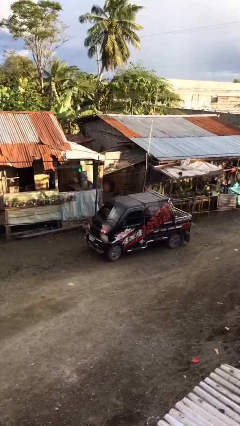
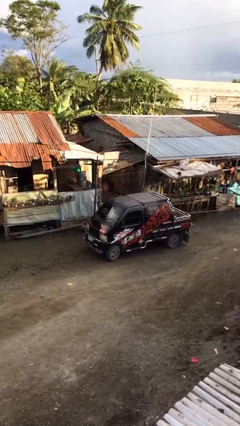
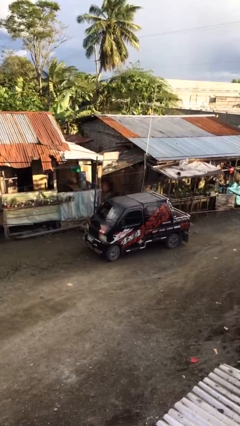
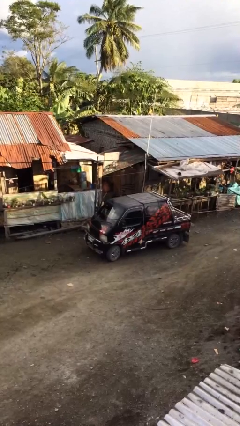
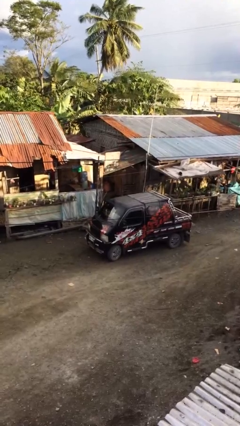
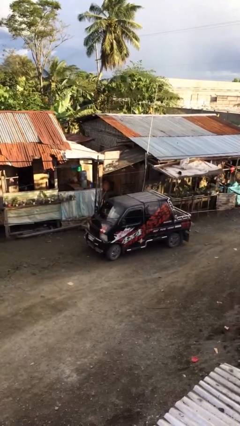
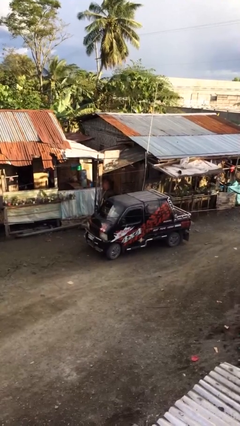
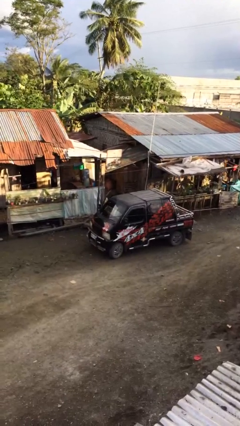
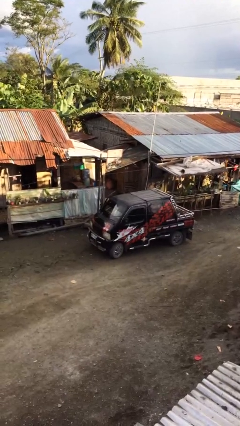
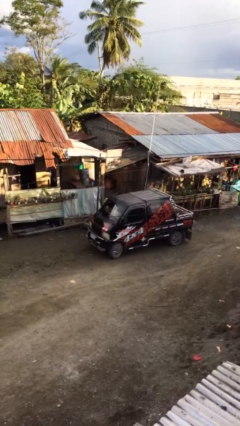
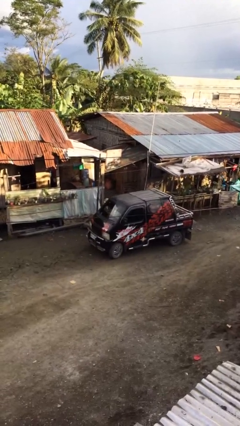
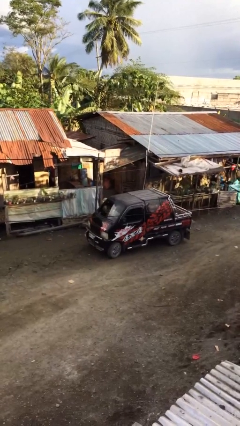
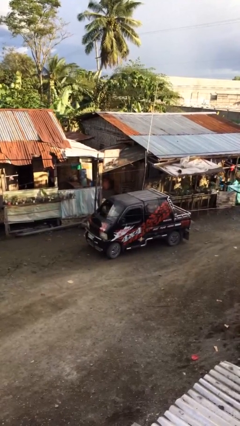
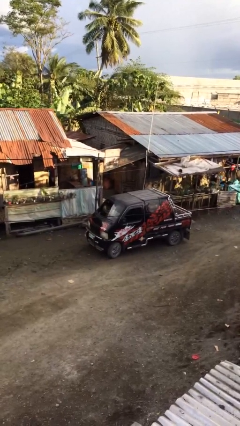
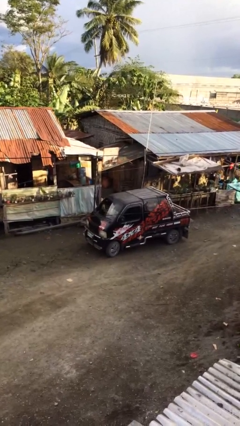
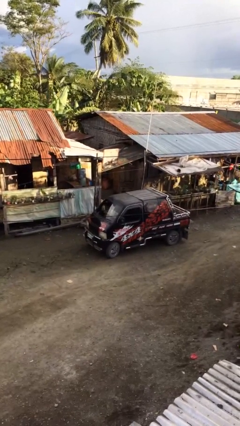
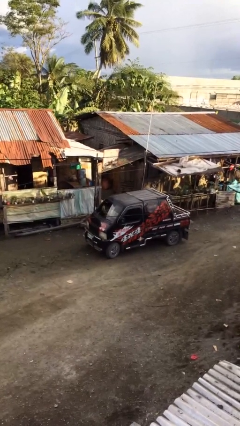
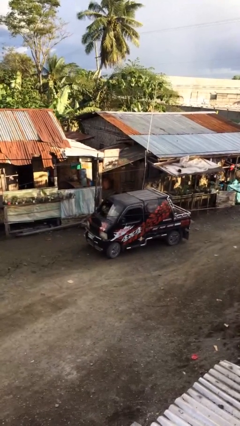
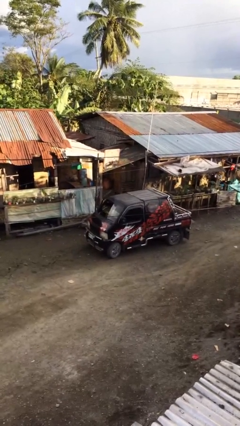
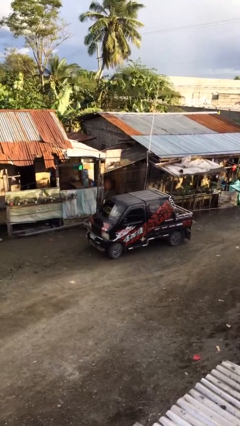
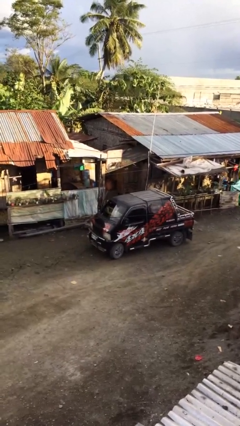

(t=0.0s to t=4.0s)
person enters car

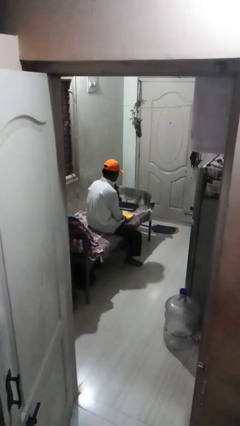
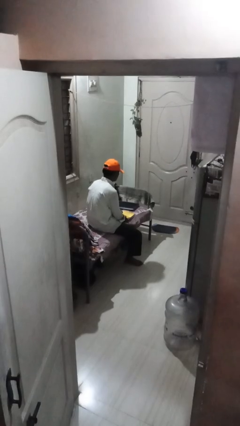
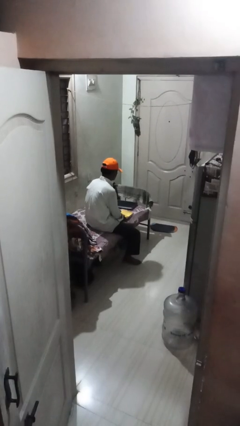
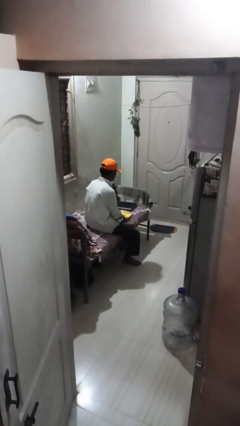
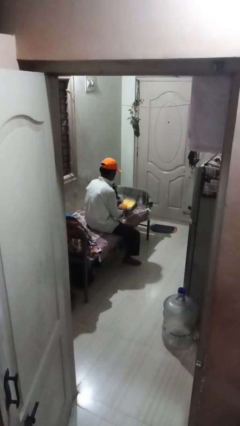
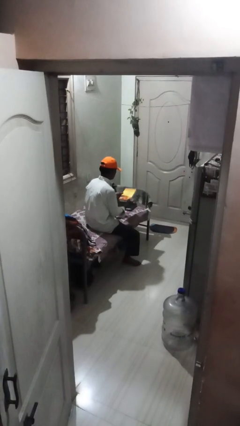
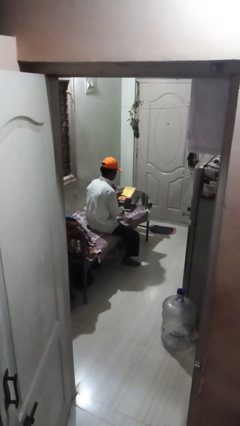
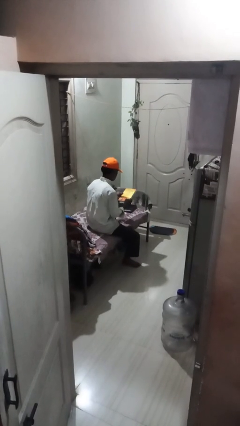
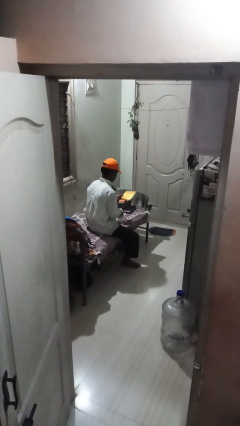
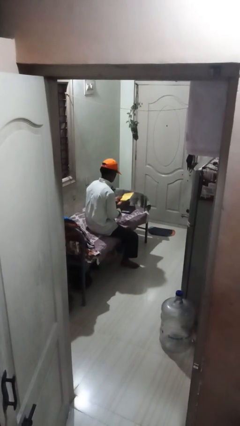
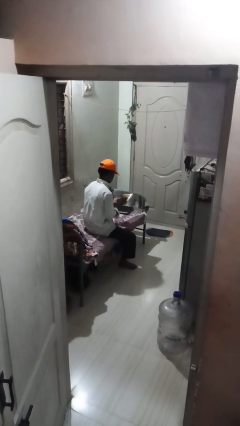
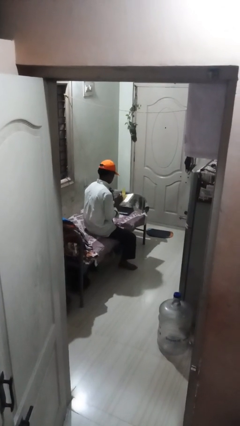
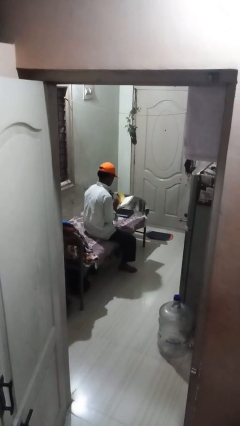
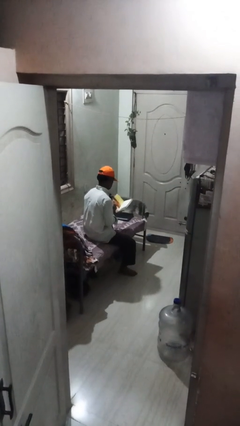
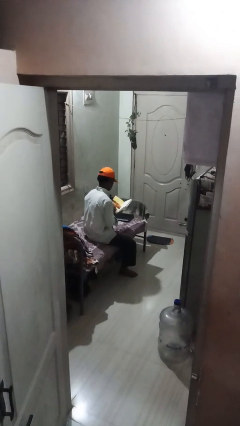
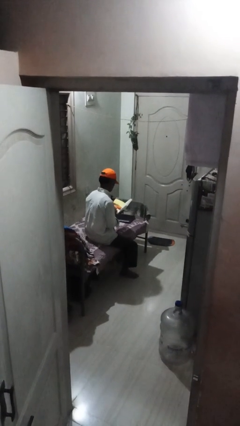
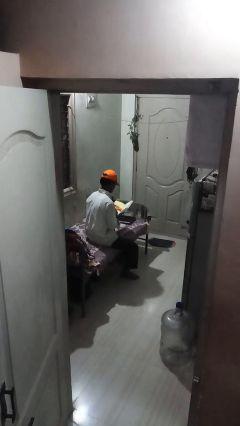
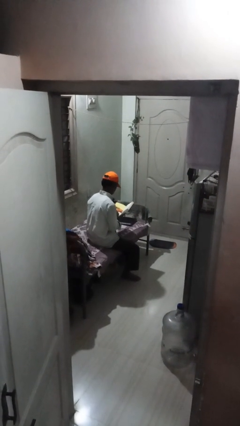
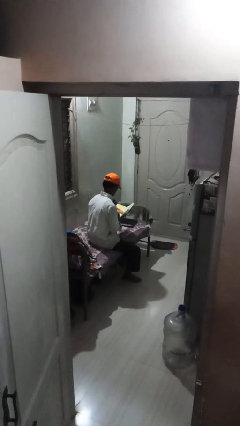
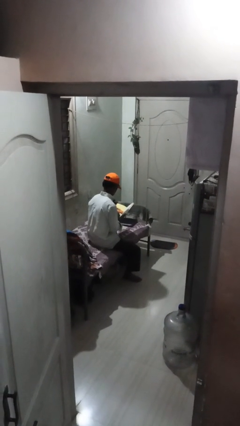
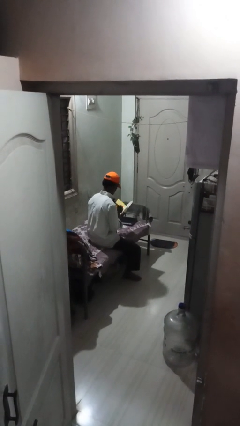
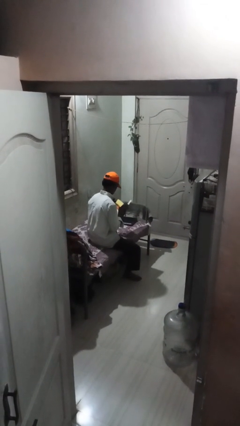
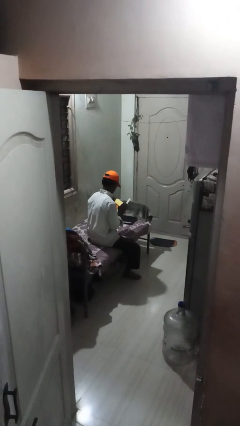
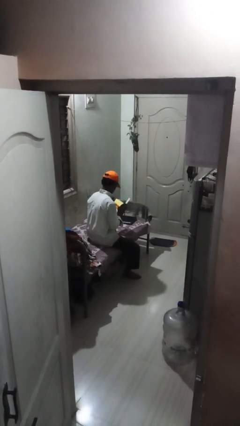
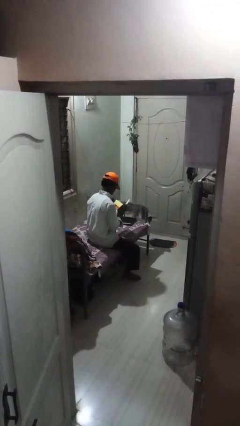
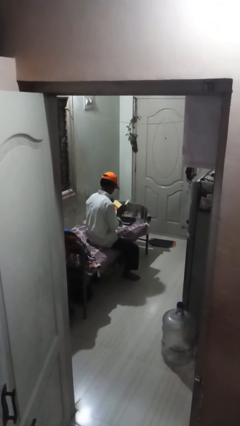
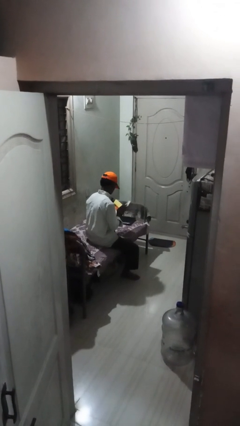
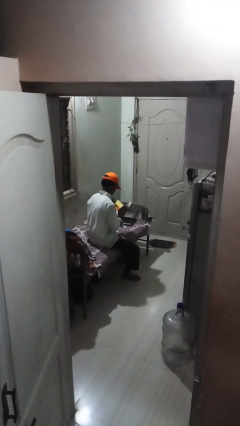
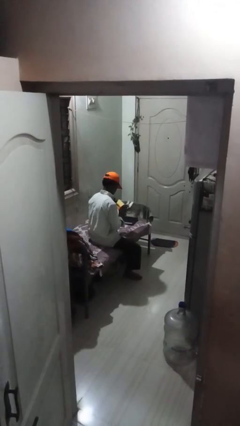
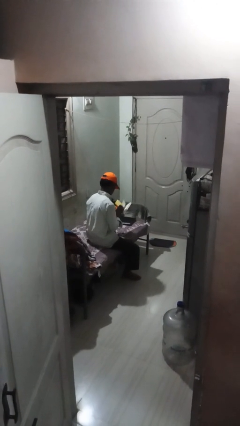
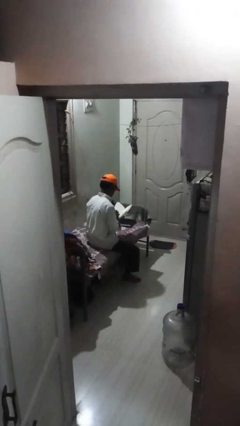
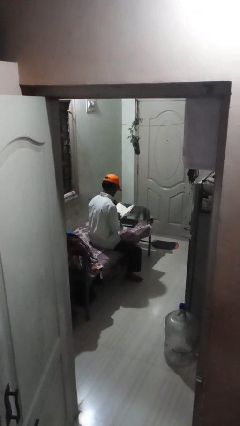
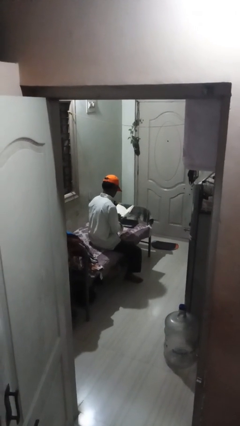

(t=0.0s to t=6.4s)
person reads book

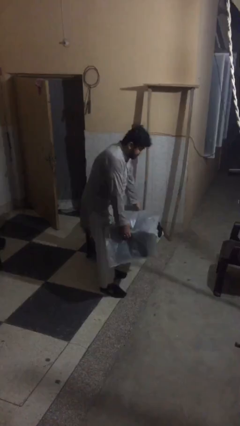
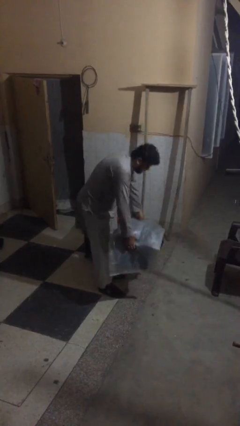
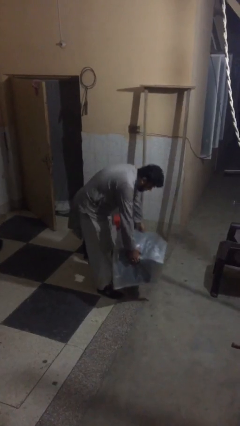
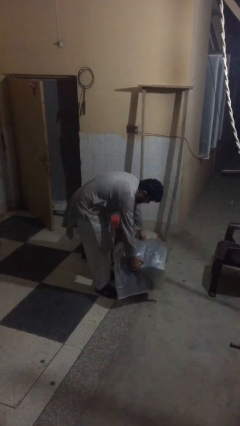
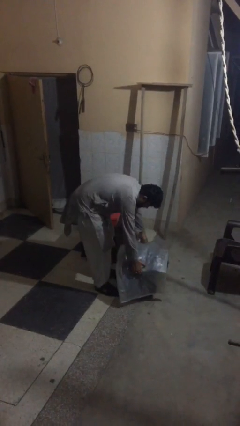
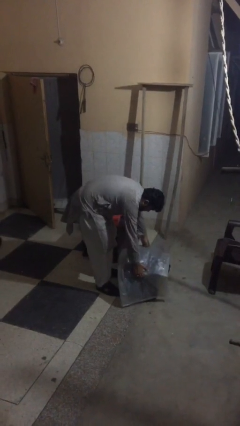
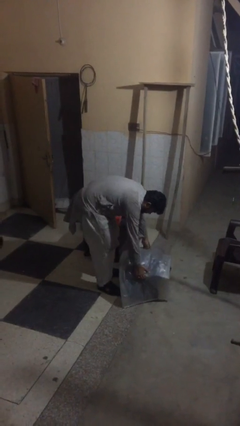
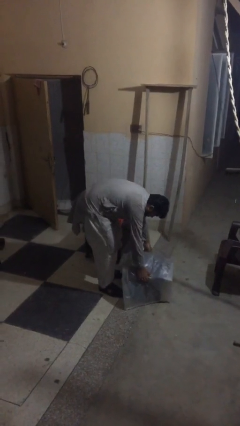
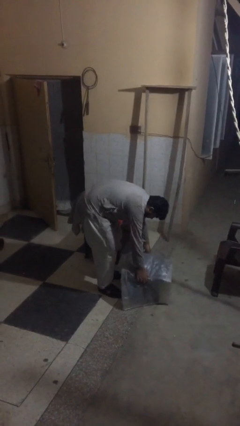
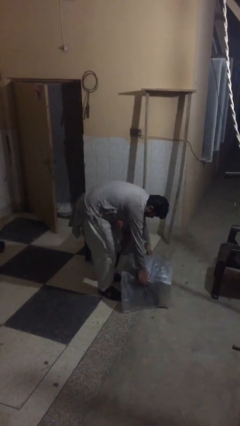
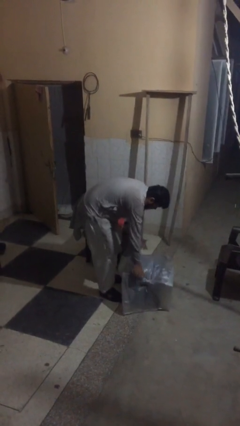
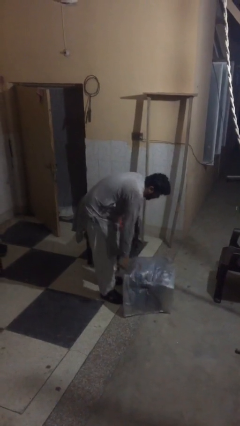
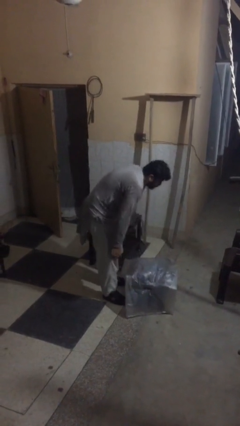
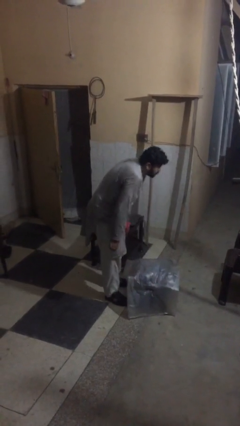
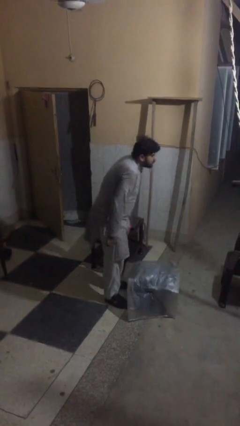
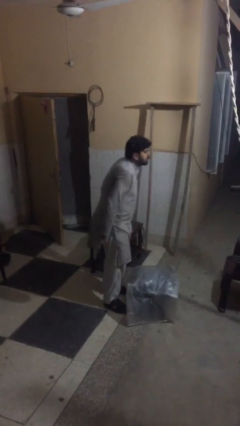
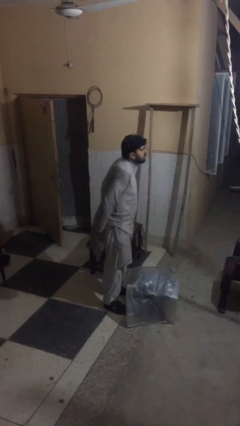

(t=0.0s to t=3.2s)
person puts down object on floor
